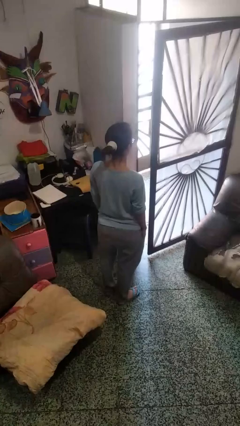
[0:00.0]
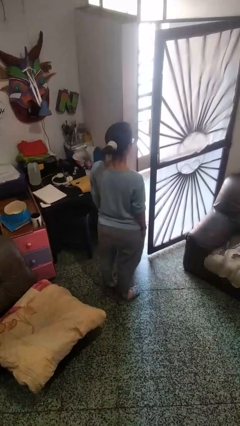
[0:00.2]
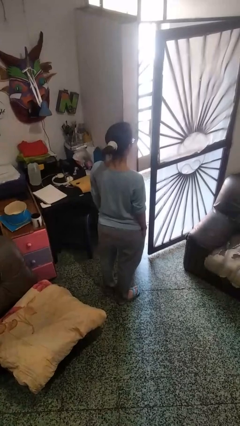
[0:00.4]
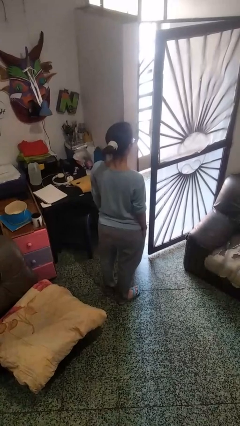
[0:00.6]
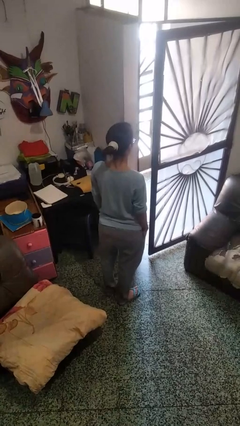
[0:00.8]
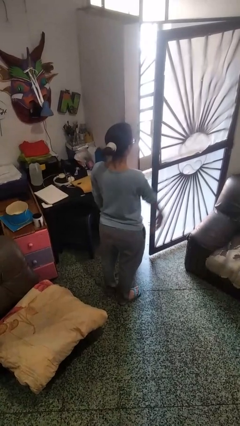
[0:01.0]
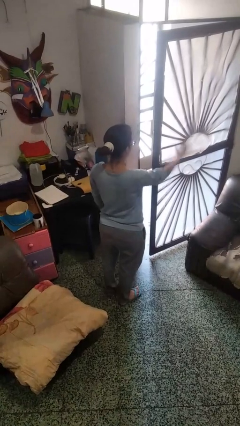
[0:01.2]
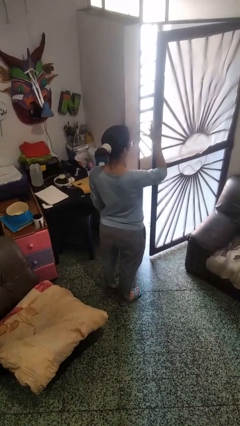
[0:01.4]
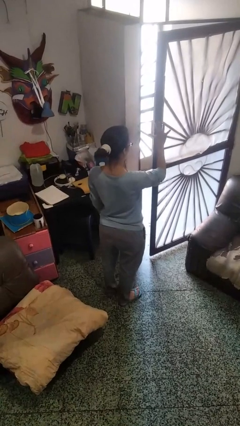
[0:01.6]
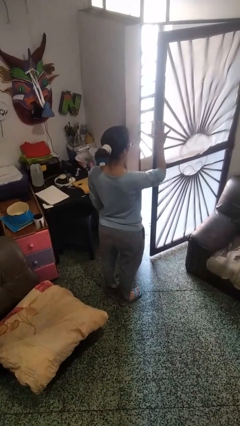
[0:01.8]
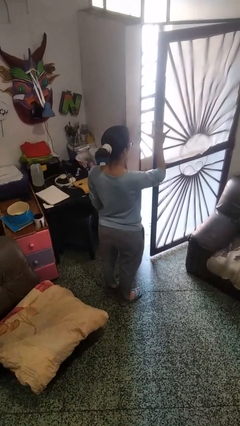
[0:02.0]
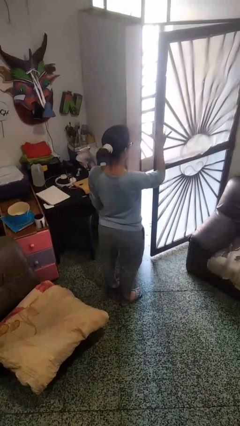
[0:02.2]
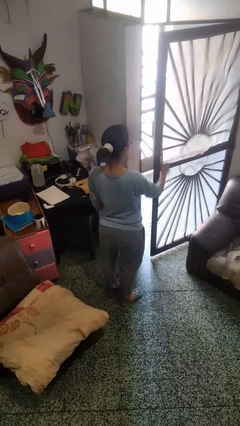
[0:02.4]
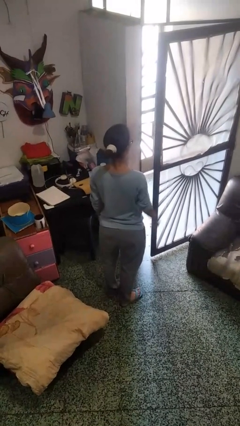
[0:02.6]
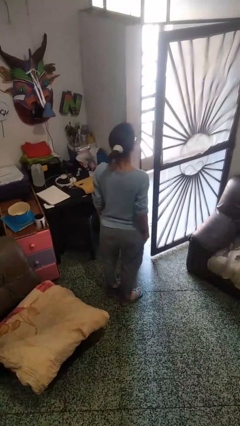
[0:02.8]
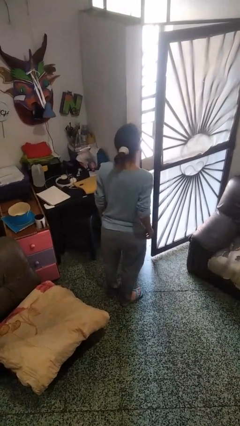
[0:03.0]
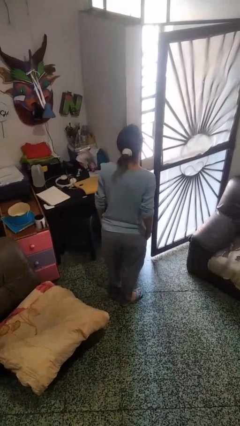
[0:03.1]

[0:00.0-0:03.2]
person gestures number five

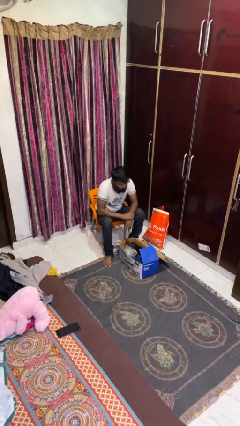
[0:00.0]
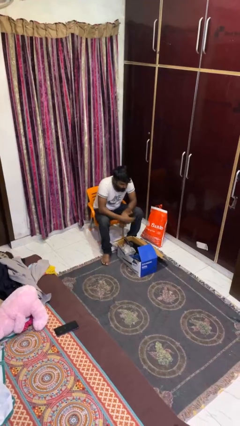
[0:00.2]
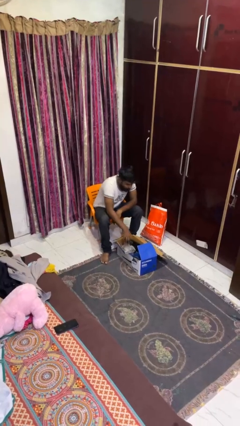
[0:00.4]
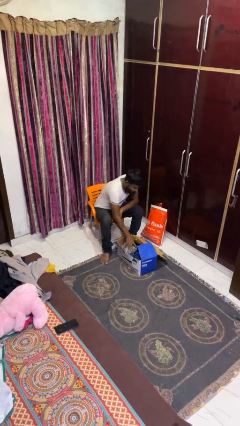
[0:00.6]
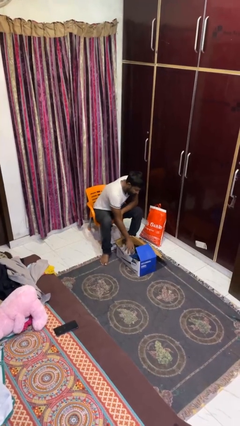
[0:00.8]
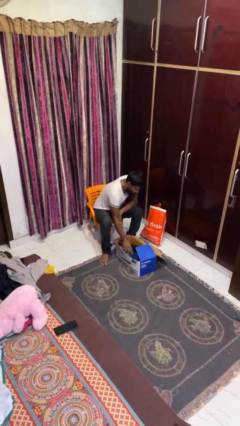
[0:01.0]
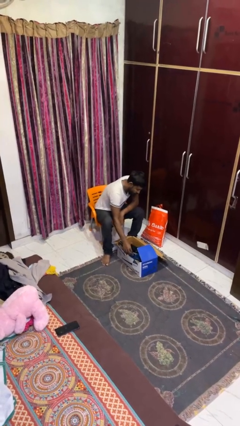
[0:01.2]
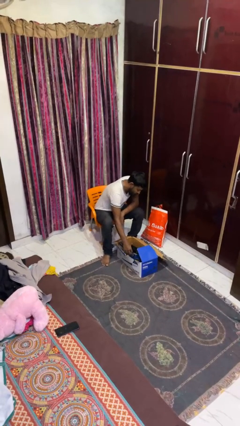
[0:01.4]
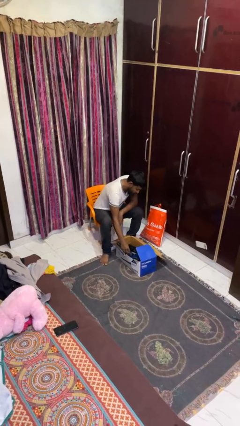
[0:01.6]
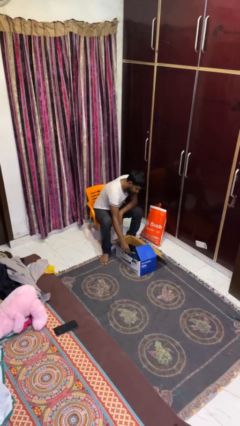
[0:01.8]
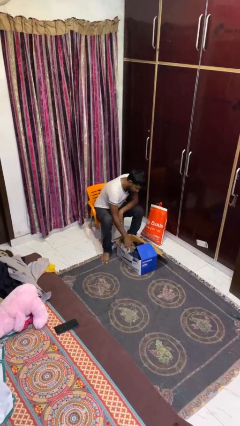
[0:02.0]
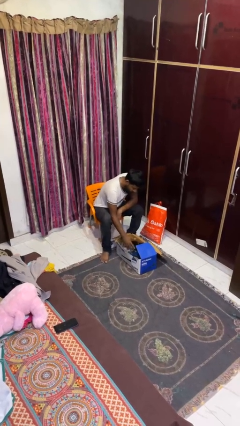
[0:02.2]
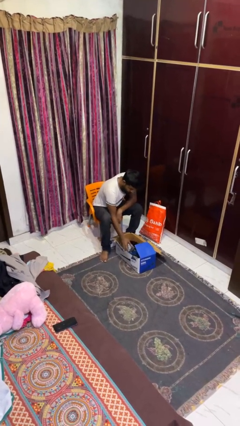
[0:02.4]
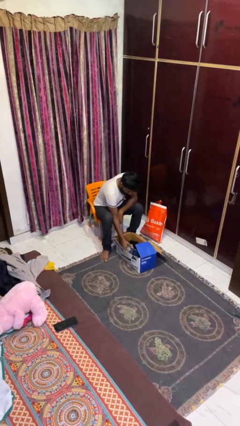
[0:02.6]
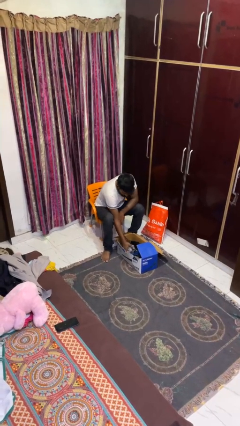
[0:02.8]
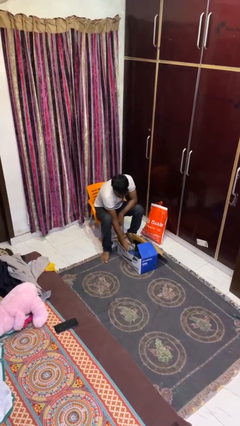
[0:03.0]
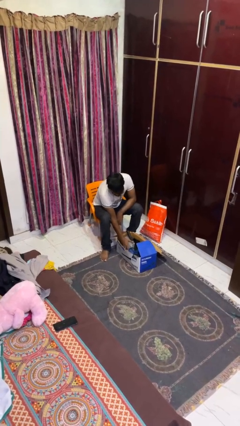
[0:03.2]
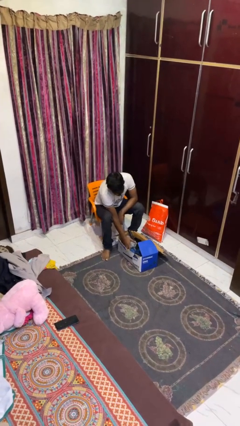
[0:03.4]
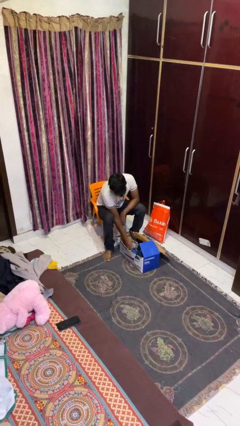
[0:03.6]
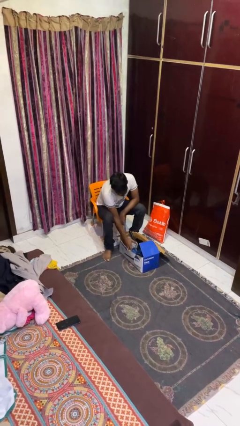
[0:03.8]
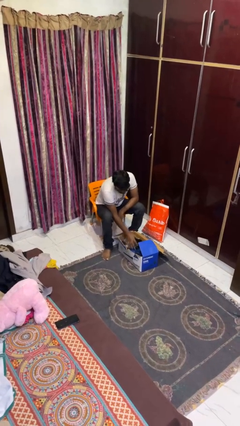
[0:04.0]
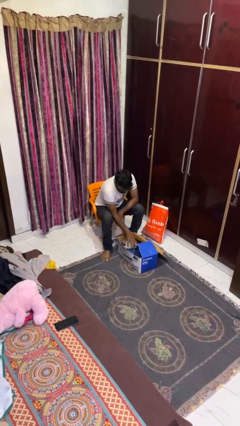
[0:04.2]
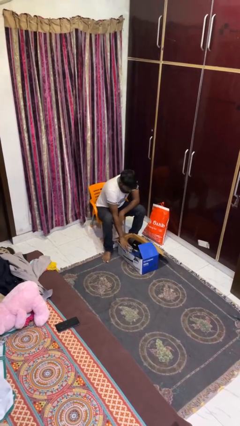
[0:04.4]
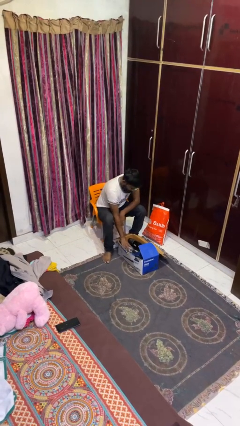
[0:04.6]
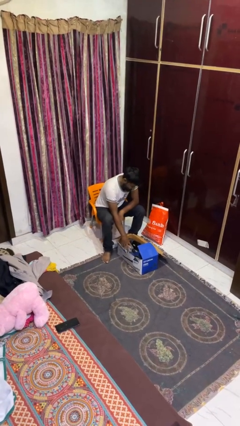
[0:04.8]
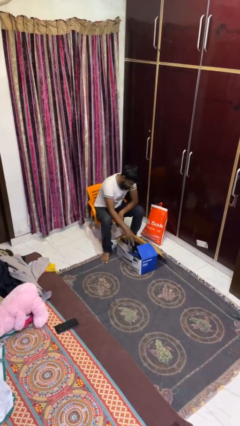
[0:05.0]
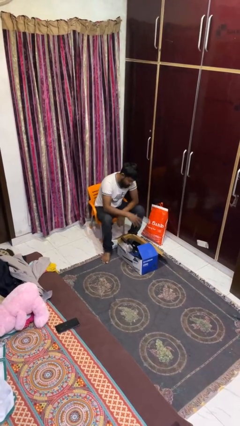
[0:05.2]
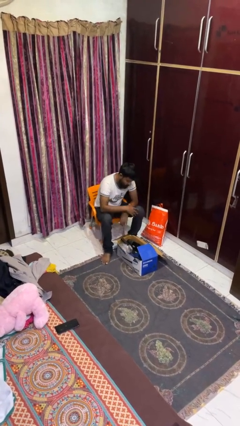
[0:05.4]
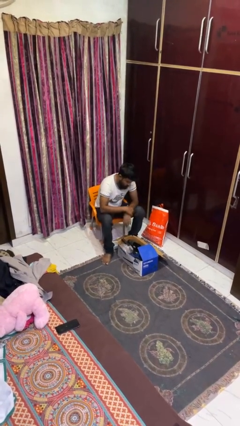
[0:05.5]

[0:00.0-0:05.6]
person searches in box

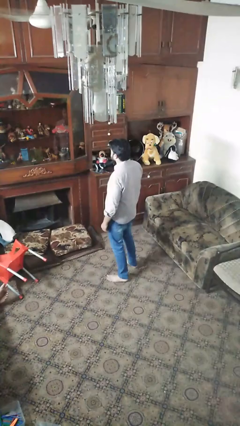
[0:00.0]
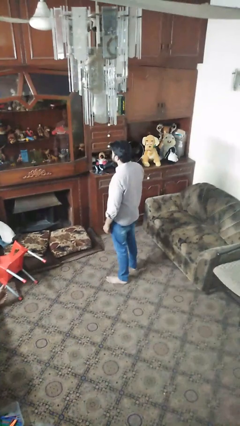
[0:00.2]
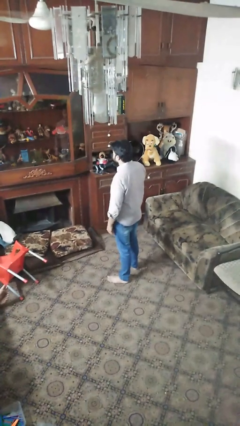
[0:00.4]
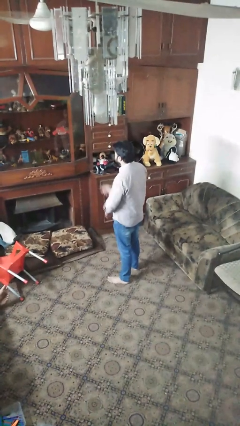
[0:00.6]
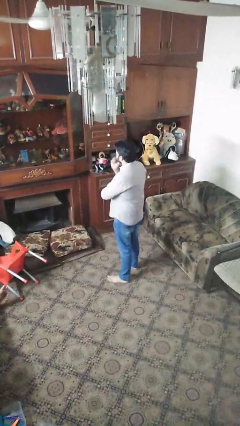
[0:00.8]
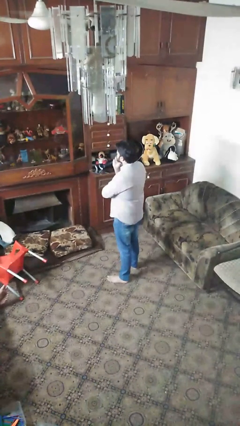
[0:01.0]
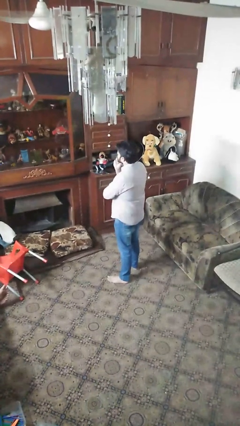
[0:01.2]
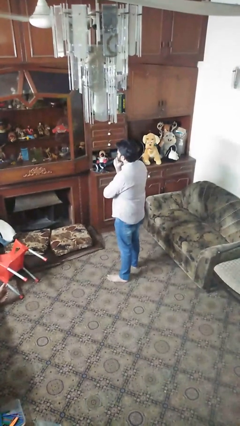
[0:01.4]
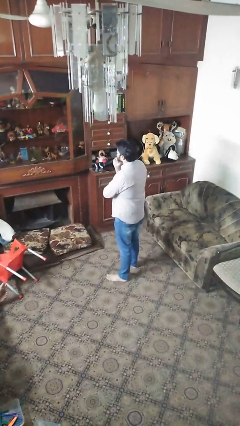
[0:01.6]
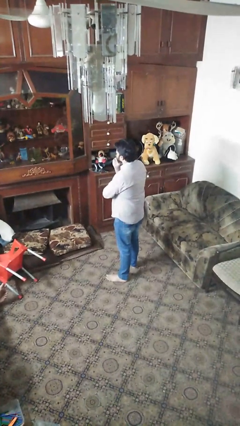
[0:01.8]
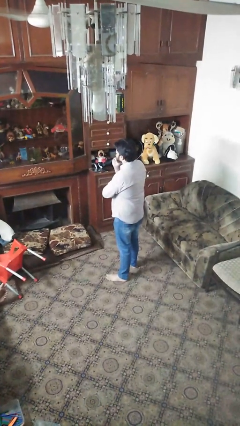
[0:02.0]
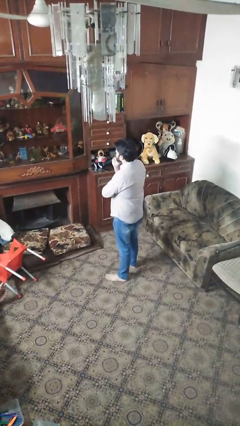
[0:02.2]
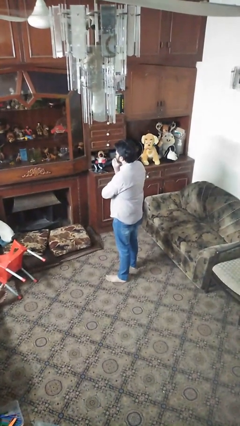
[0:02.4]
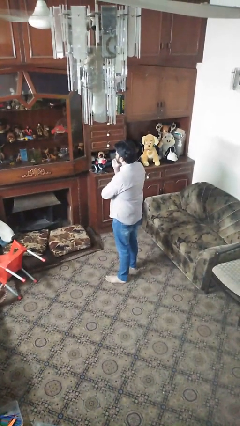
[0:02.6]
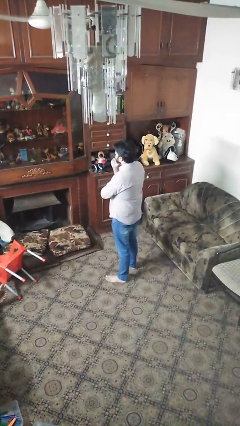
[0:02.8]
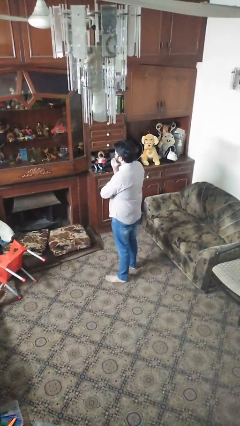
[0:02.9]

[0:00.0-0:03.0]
person strokes chin

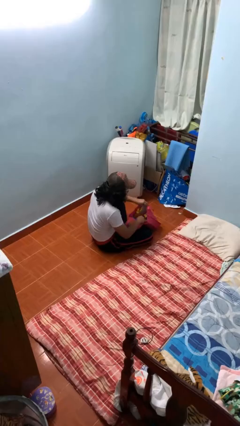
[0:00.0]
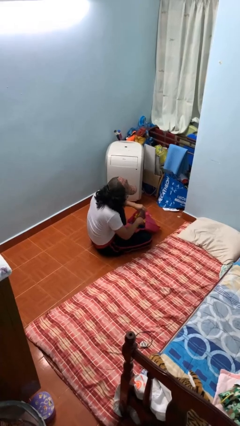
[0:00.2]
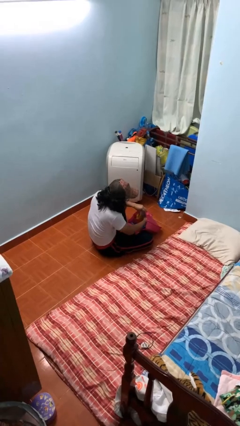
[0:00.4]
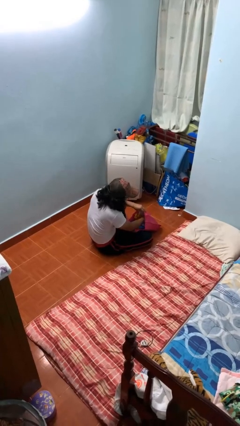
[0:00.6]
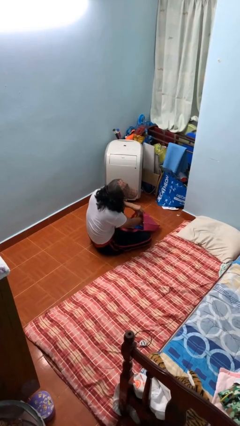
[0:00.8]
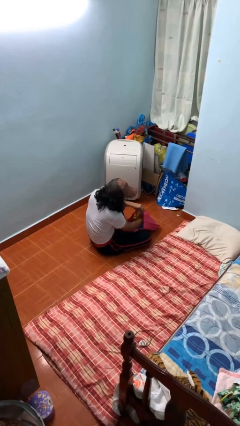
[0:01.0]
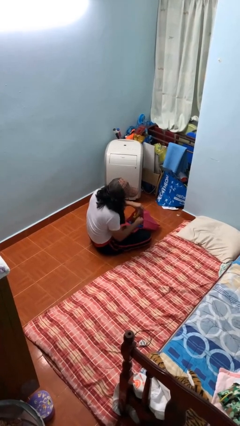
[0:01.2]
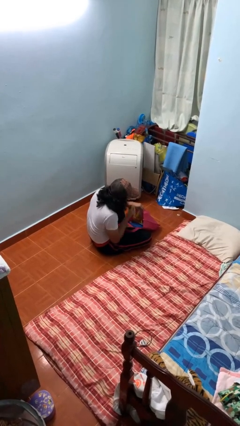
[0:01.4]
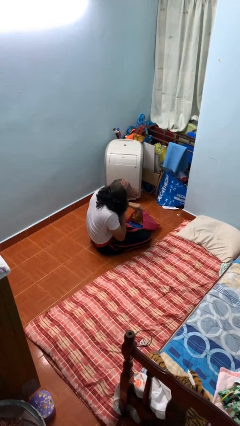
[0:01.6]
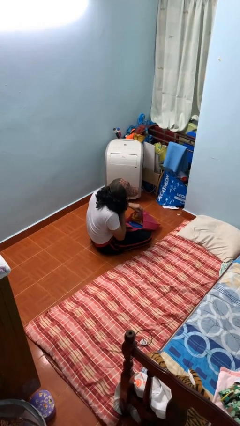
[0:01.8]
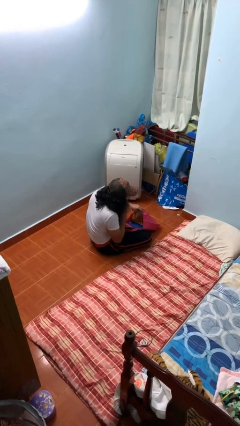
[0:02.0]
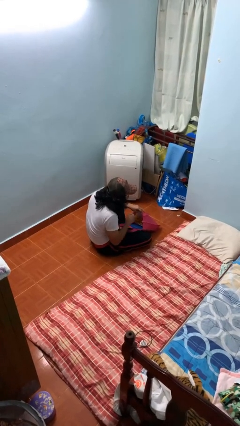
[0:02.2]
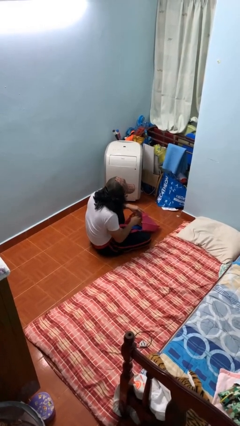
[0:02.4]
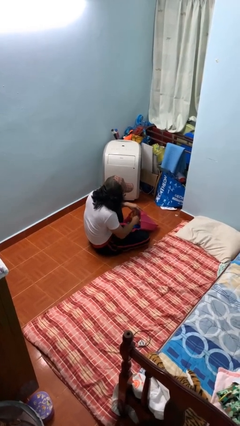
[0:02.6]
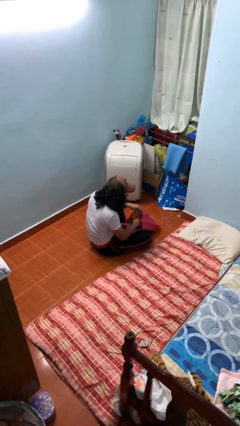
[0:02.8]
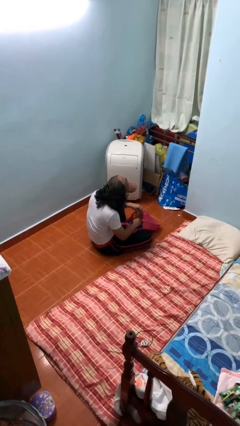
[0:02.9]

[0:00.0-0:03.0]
person eats snack from bag

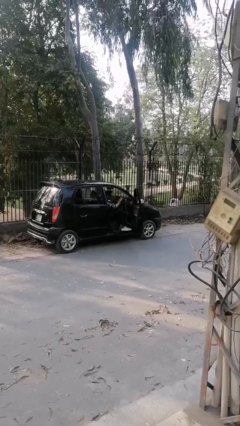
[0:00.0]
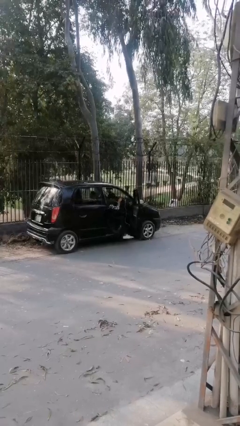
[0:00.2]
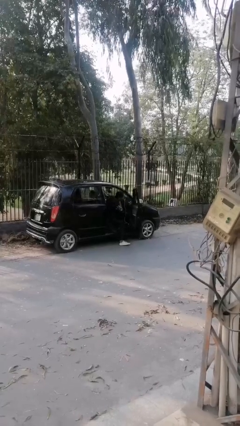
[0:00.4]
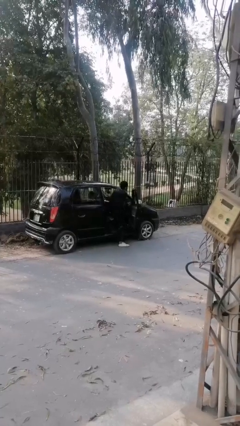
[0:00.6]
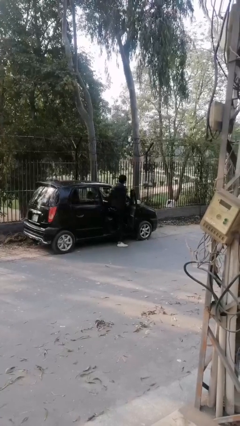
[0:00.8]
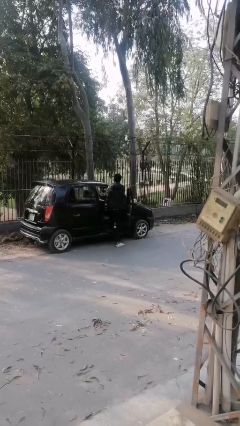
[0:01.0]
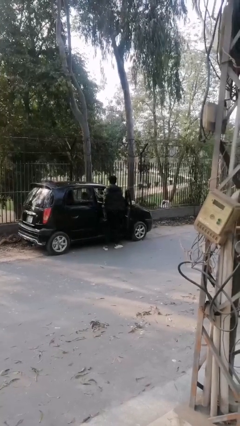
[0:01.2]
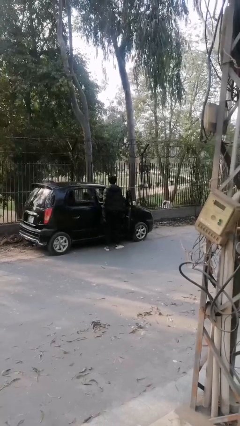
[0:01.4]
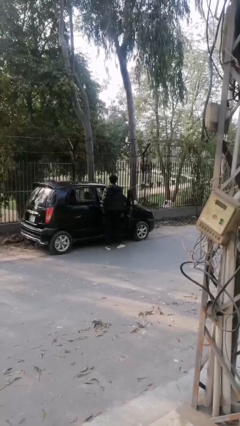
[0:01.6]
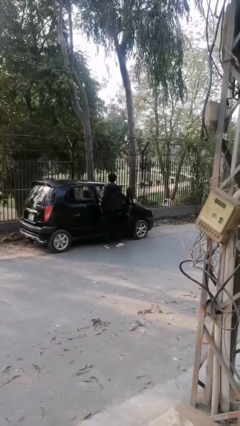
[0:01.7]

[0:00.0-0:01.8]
person exits car

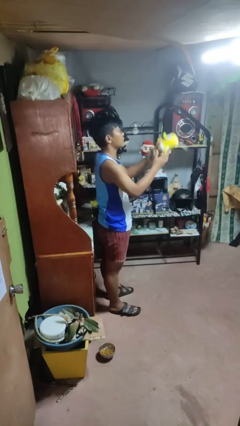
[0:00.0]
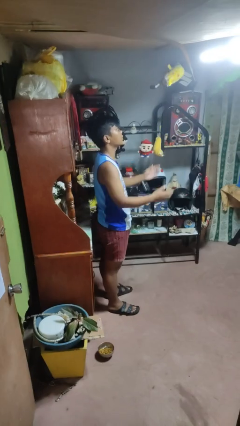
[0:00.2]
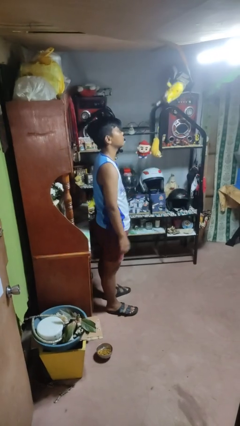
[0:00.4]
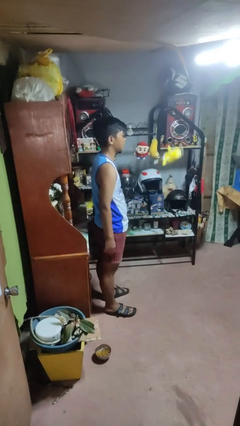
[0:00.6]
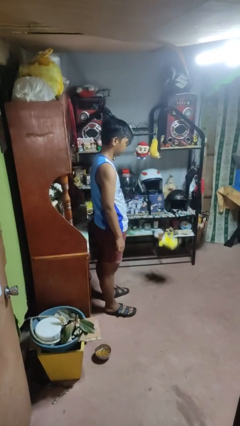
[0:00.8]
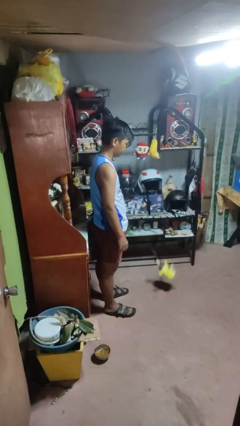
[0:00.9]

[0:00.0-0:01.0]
person throws object into air
